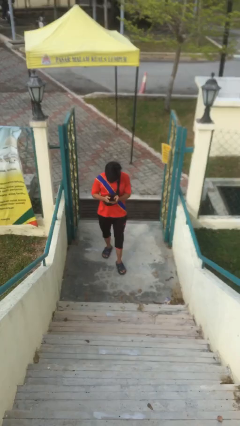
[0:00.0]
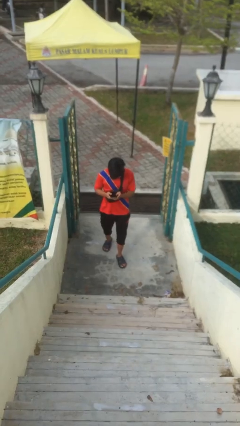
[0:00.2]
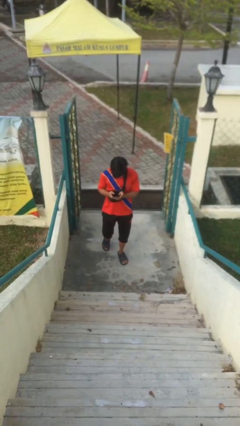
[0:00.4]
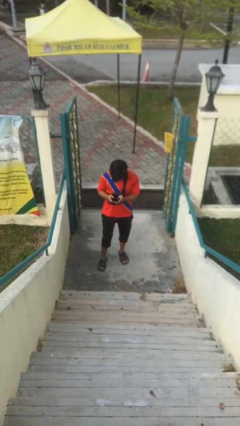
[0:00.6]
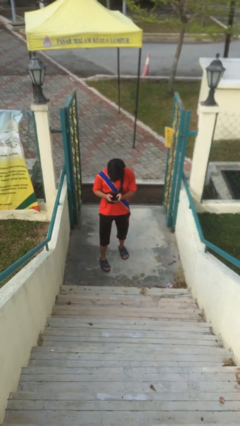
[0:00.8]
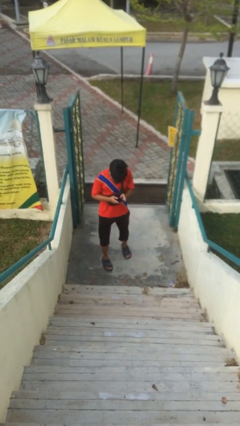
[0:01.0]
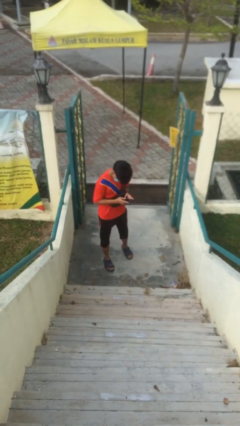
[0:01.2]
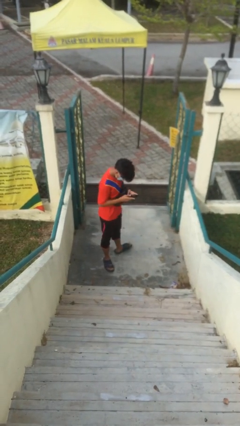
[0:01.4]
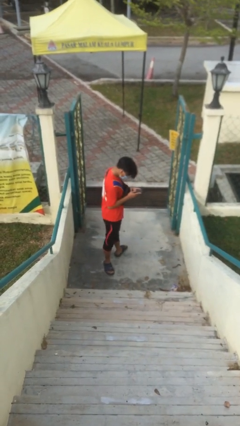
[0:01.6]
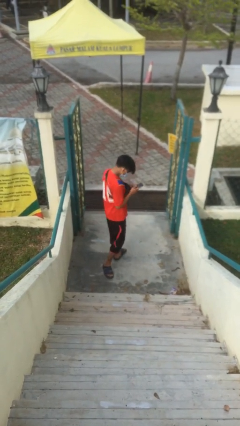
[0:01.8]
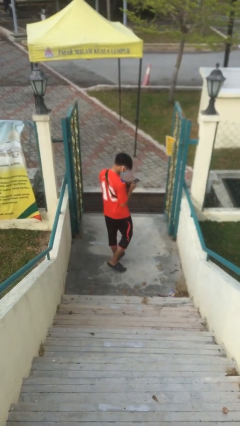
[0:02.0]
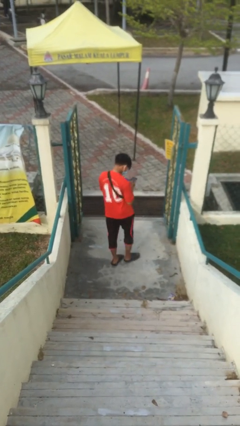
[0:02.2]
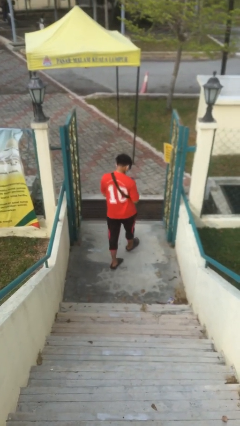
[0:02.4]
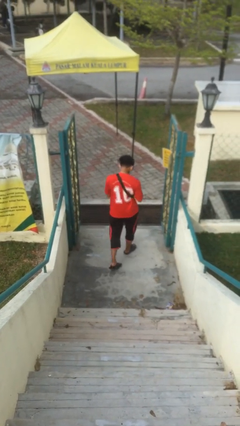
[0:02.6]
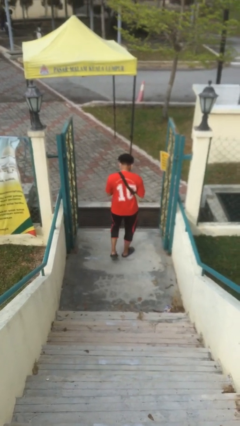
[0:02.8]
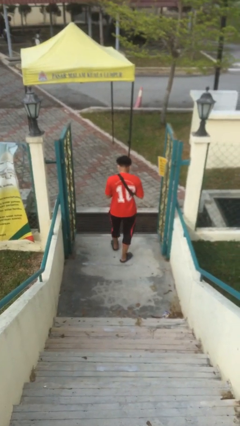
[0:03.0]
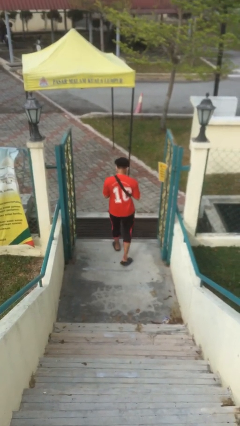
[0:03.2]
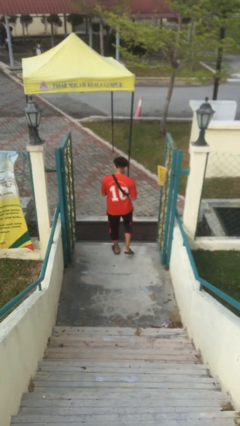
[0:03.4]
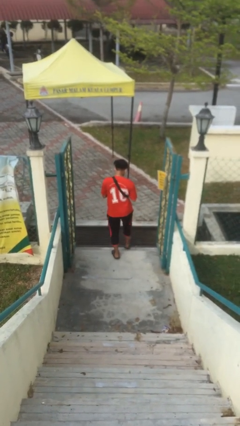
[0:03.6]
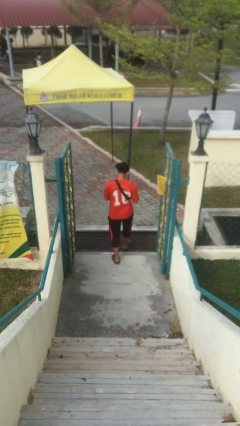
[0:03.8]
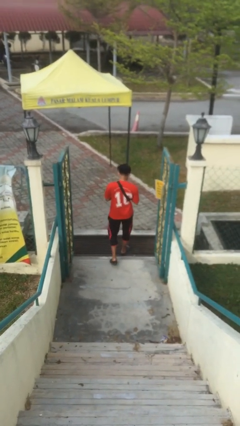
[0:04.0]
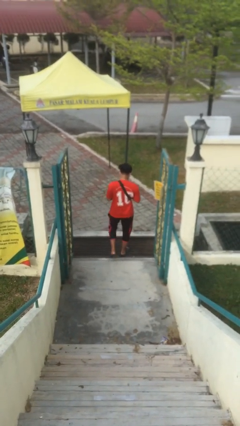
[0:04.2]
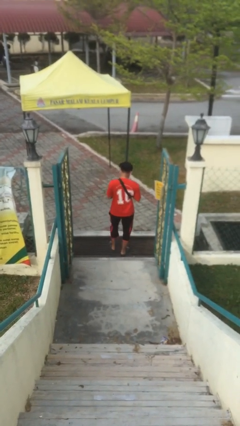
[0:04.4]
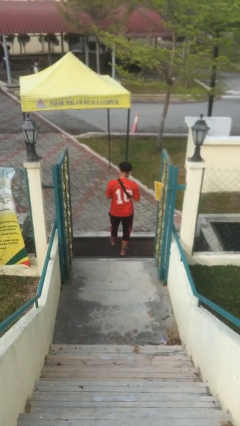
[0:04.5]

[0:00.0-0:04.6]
person exits scene through structure

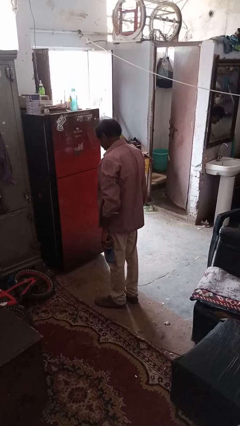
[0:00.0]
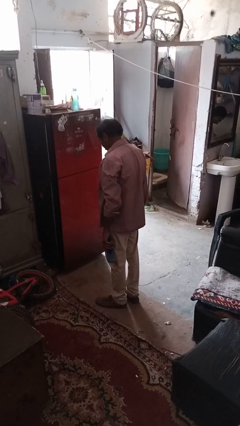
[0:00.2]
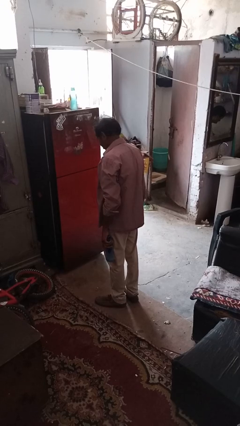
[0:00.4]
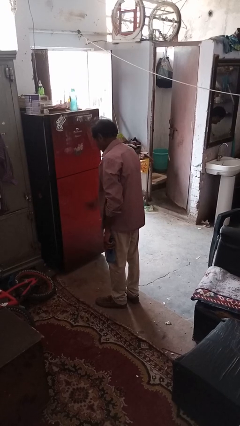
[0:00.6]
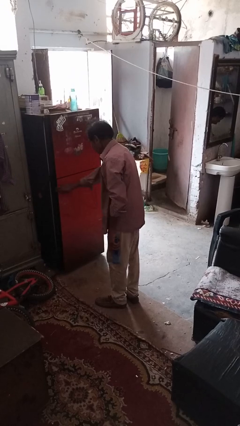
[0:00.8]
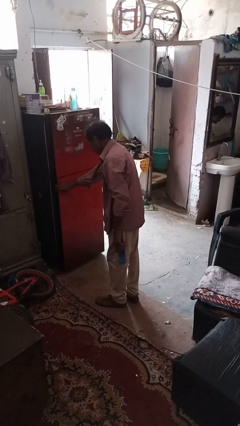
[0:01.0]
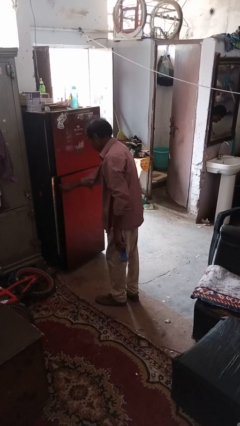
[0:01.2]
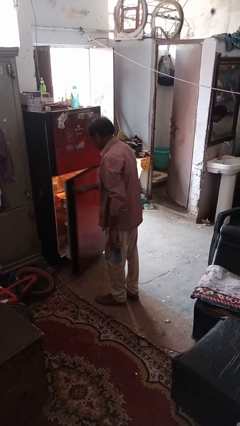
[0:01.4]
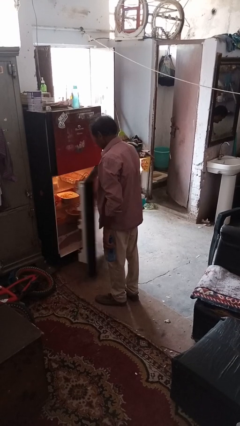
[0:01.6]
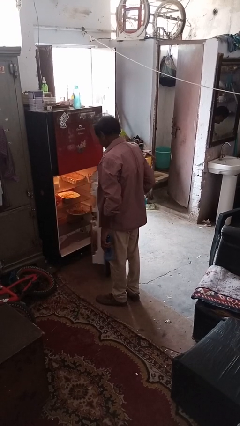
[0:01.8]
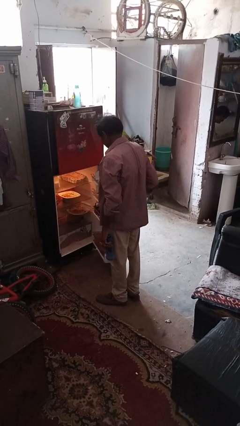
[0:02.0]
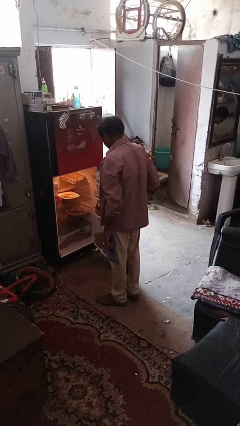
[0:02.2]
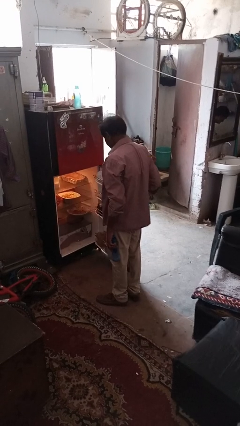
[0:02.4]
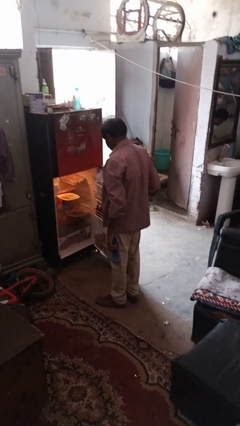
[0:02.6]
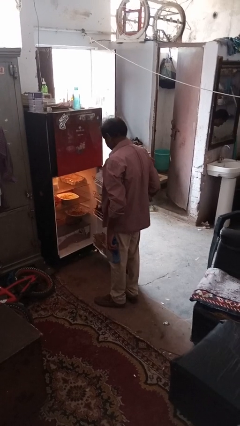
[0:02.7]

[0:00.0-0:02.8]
person opens refrigerator

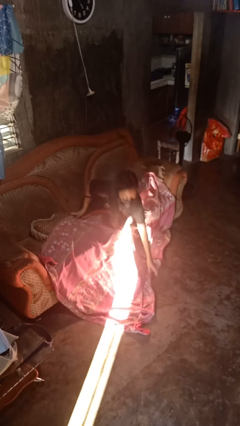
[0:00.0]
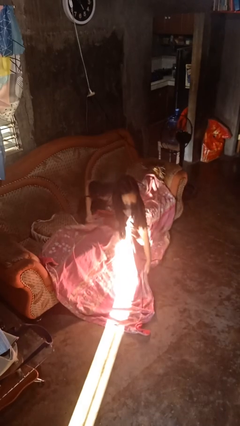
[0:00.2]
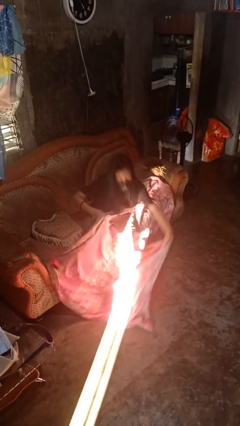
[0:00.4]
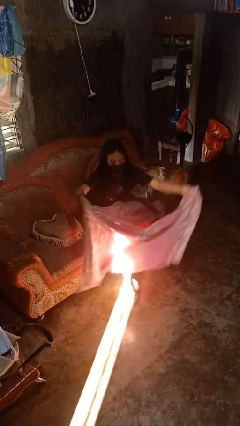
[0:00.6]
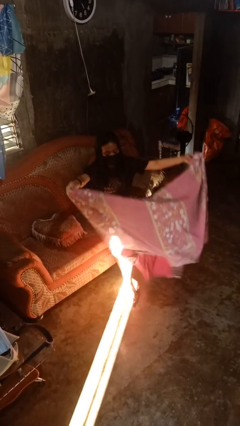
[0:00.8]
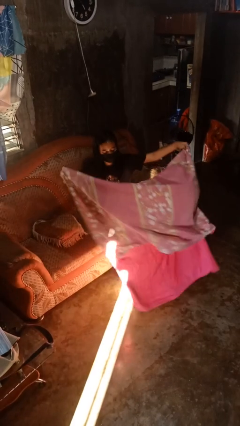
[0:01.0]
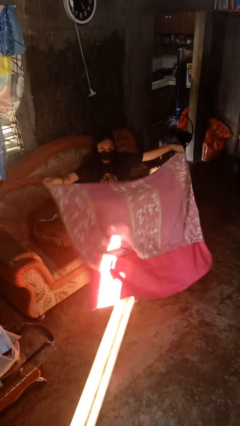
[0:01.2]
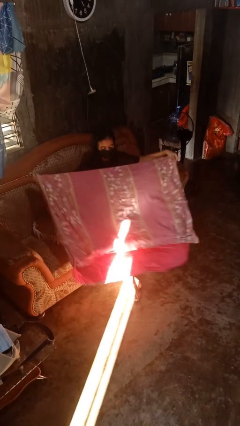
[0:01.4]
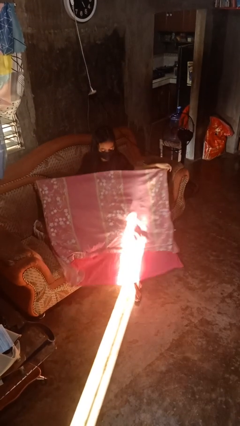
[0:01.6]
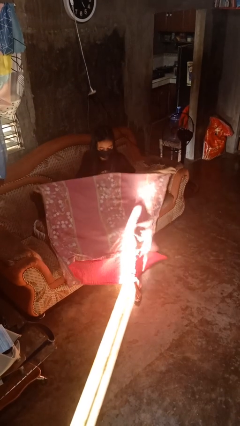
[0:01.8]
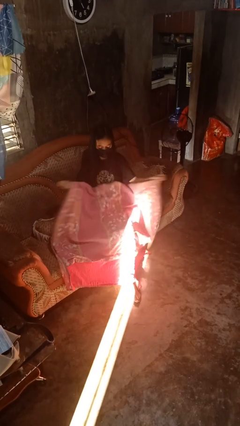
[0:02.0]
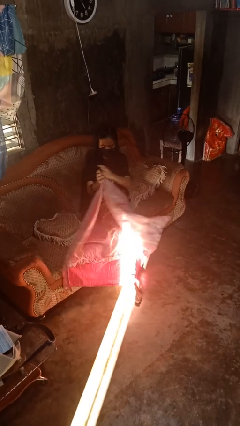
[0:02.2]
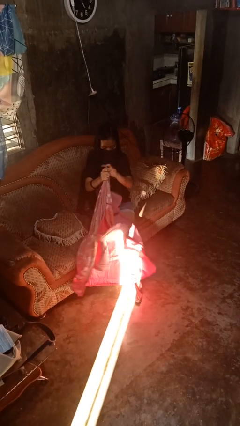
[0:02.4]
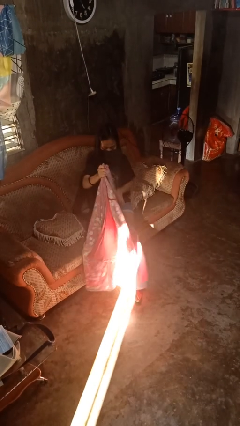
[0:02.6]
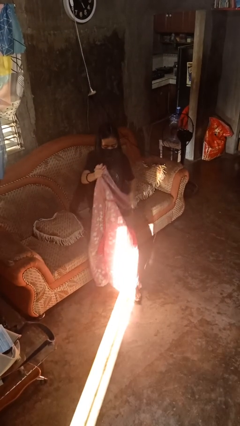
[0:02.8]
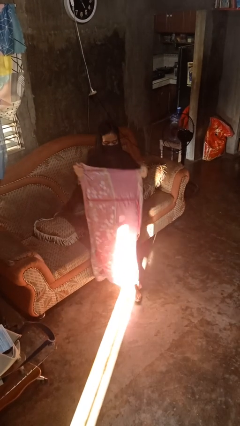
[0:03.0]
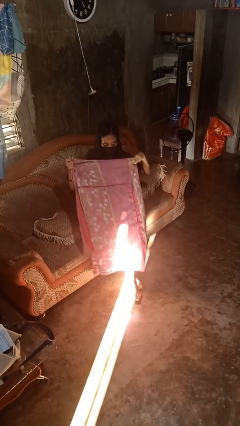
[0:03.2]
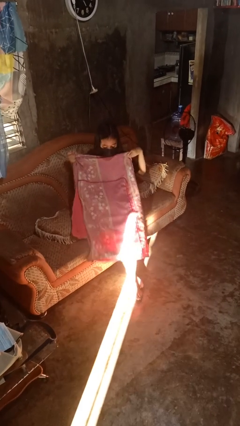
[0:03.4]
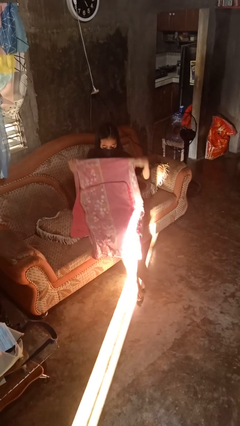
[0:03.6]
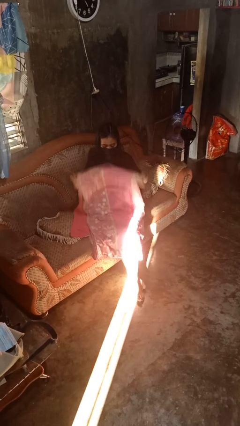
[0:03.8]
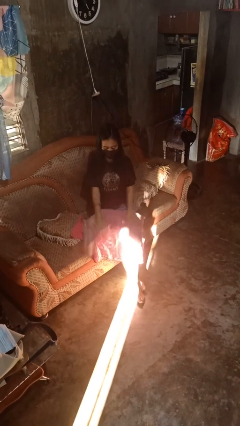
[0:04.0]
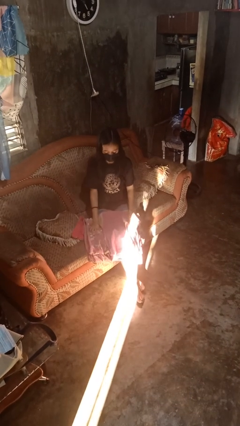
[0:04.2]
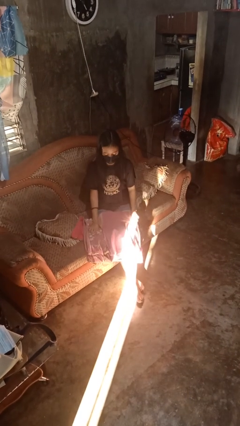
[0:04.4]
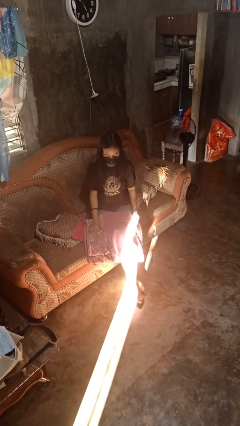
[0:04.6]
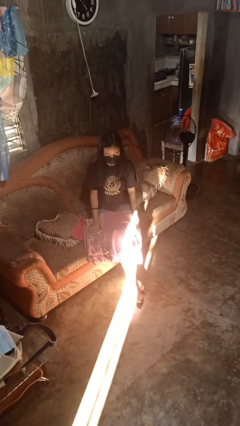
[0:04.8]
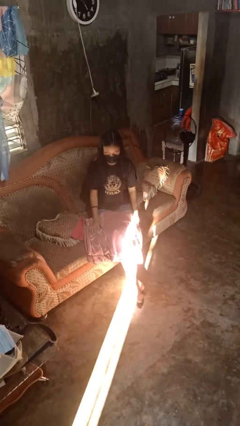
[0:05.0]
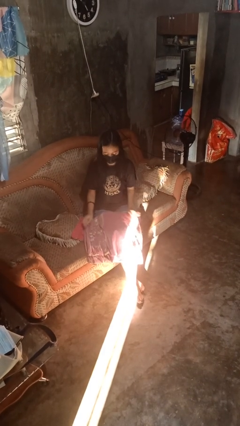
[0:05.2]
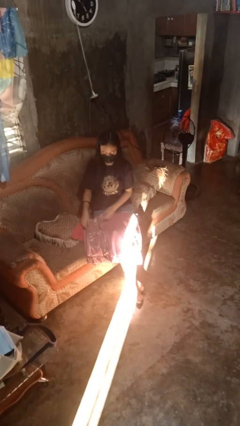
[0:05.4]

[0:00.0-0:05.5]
person folds blanket

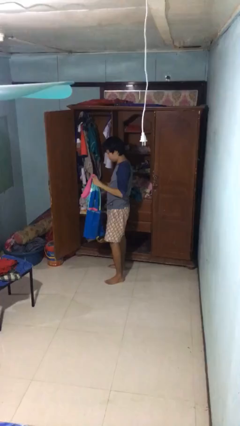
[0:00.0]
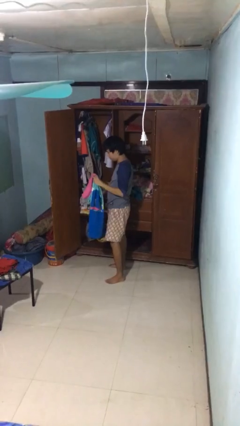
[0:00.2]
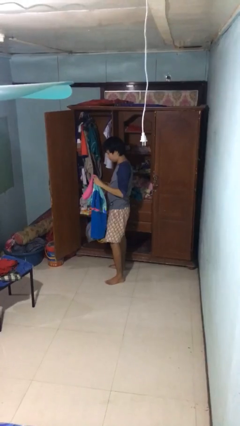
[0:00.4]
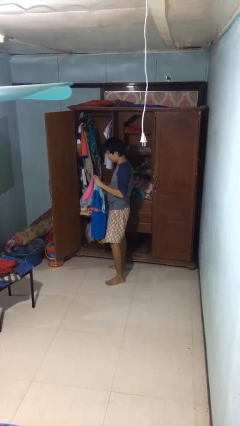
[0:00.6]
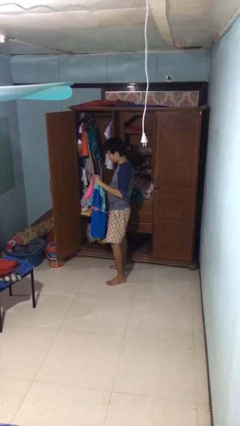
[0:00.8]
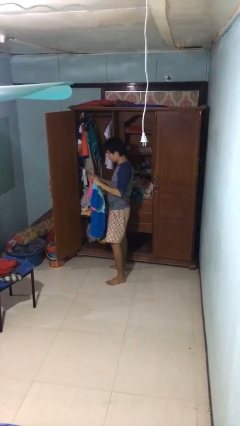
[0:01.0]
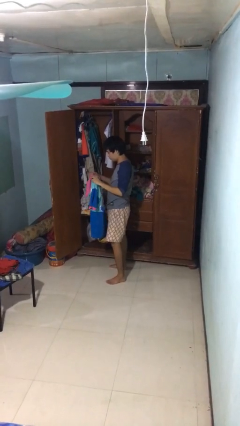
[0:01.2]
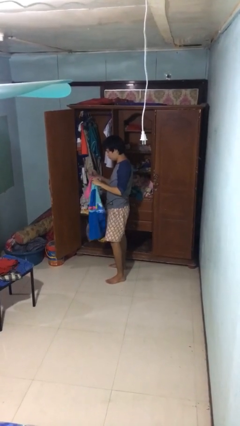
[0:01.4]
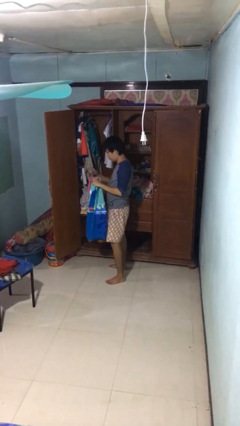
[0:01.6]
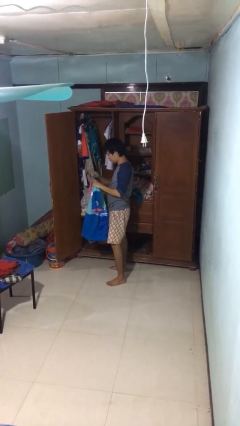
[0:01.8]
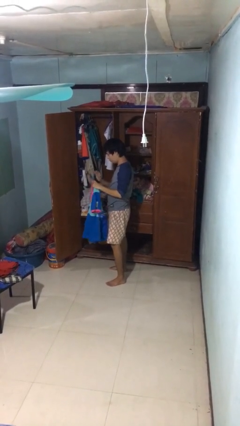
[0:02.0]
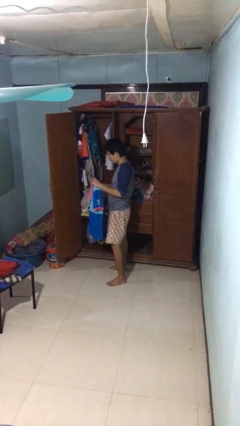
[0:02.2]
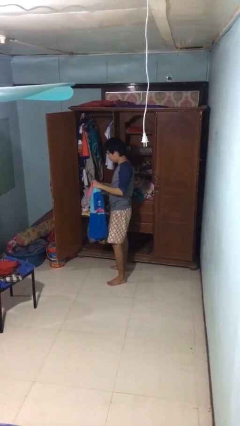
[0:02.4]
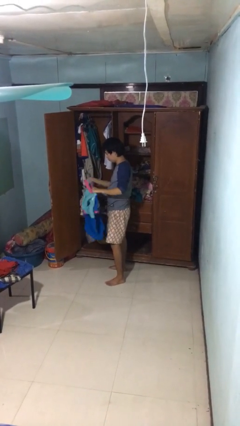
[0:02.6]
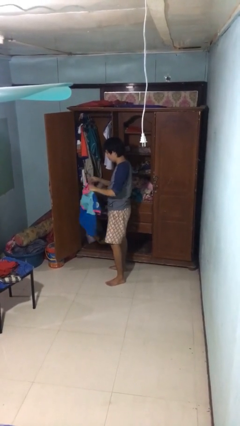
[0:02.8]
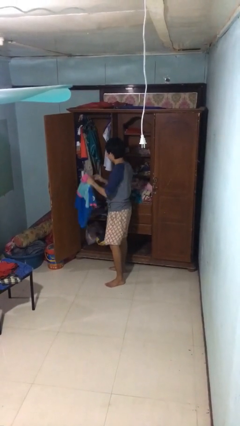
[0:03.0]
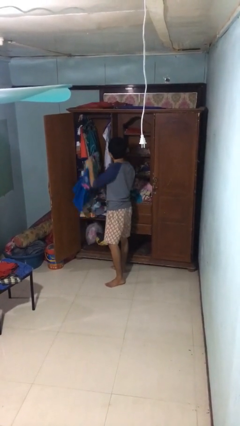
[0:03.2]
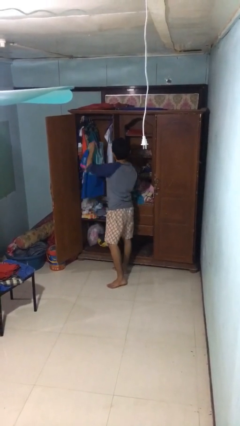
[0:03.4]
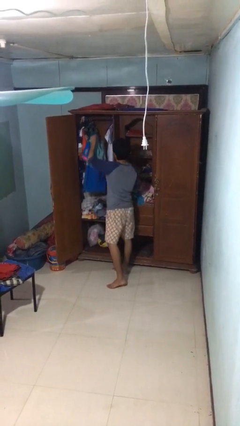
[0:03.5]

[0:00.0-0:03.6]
person puts clothes into closet

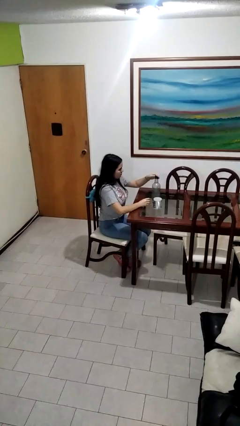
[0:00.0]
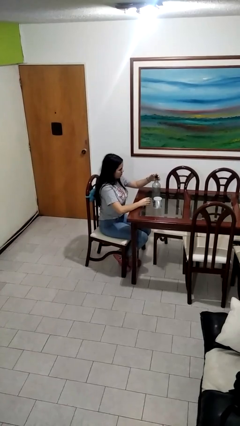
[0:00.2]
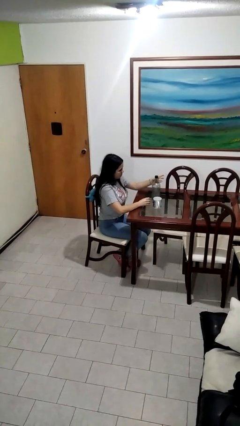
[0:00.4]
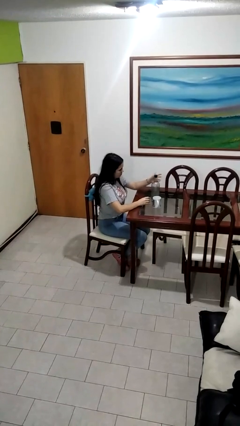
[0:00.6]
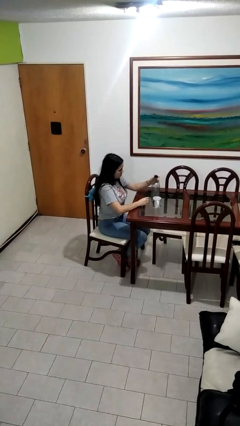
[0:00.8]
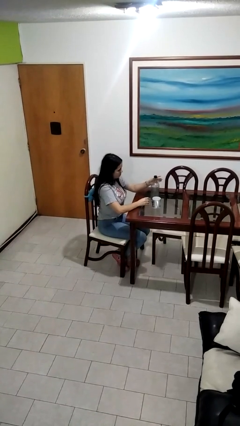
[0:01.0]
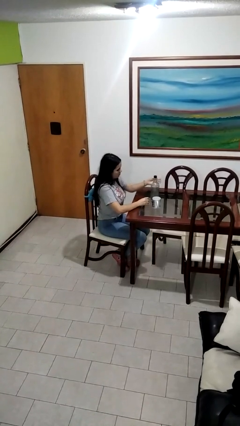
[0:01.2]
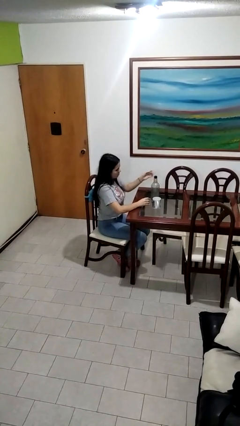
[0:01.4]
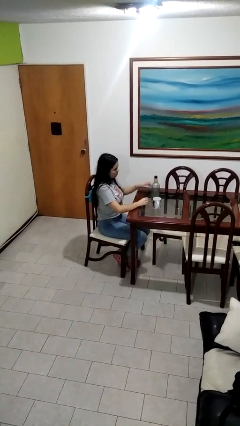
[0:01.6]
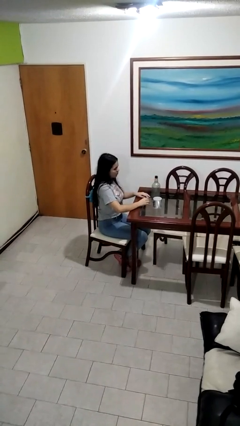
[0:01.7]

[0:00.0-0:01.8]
person screws lid to bottle
